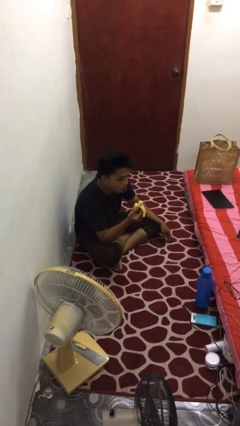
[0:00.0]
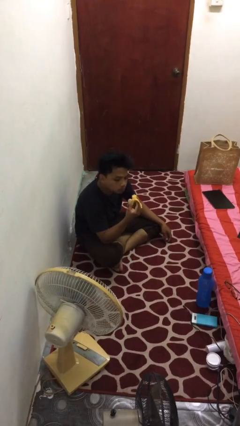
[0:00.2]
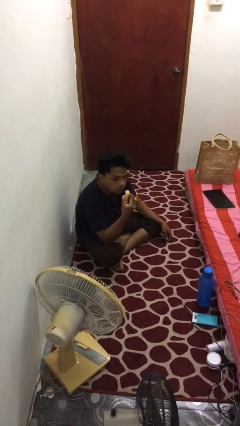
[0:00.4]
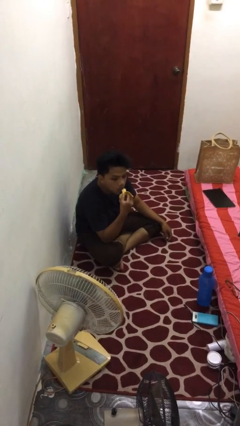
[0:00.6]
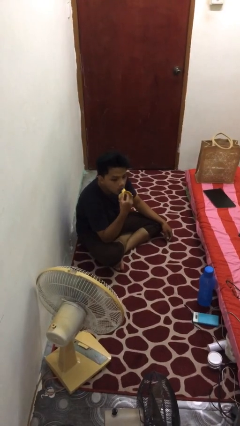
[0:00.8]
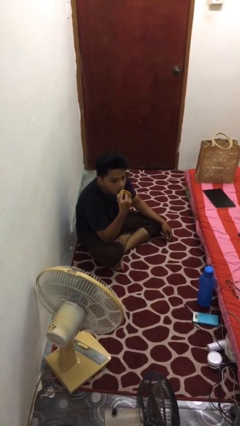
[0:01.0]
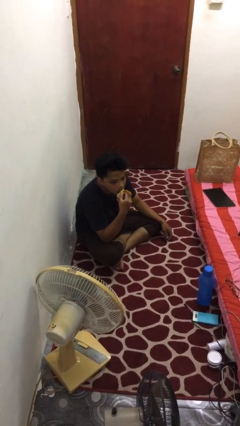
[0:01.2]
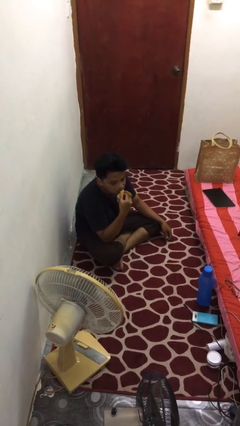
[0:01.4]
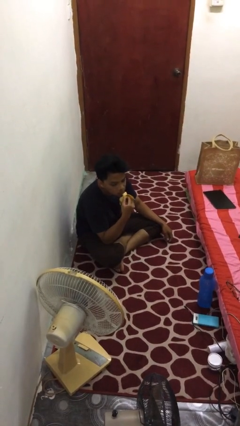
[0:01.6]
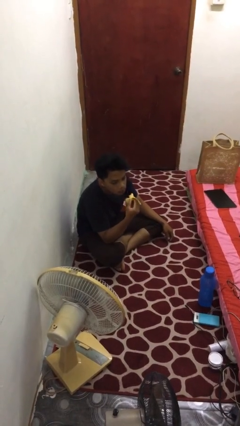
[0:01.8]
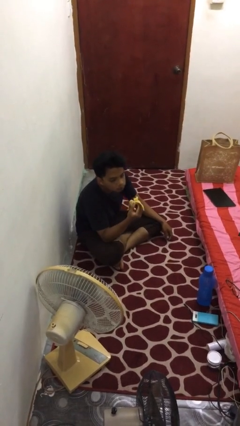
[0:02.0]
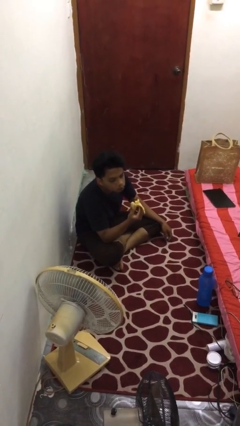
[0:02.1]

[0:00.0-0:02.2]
person eats banana

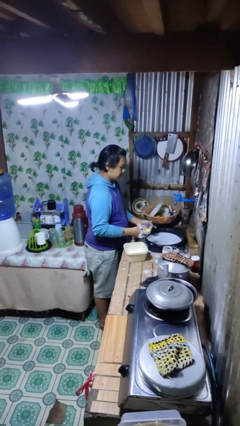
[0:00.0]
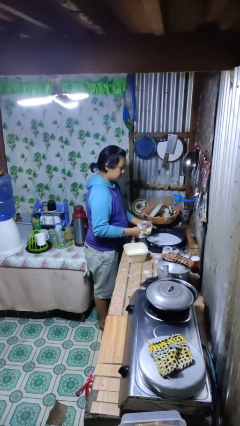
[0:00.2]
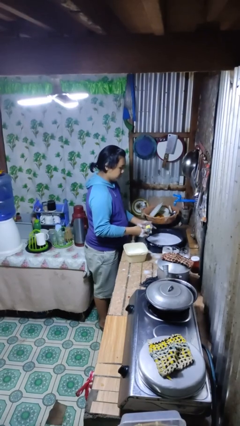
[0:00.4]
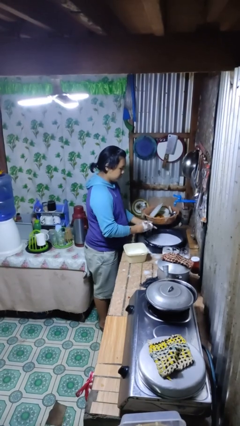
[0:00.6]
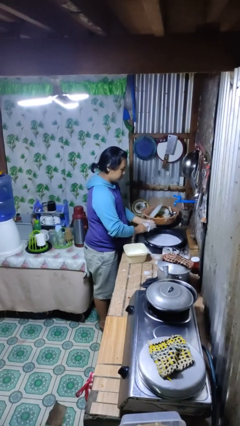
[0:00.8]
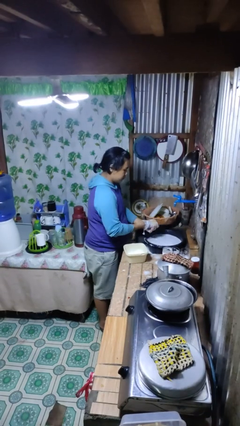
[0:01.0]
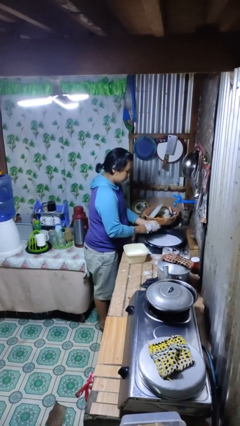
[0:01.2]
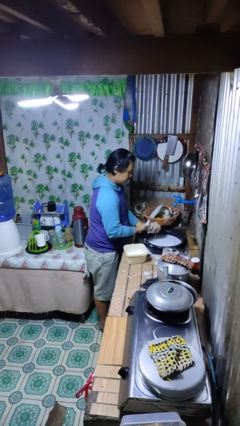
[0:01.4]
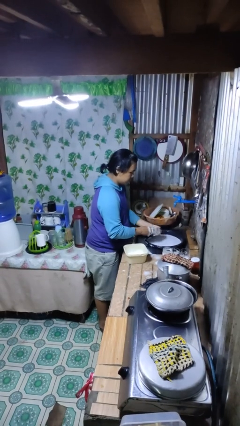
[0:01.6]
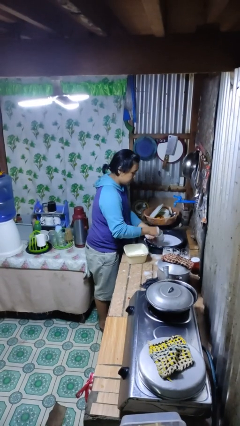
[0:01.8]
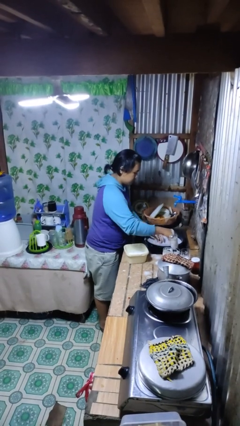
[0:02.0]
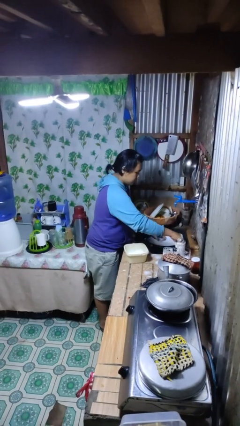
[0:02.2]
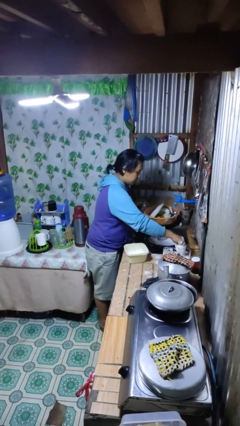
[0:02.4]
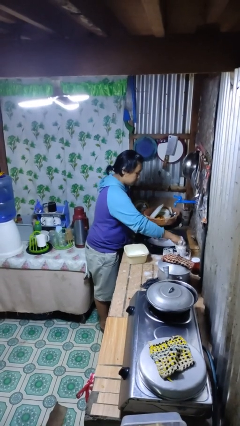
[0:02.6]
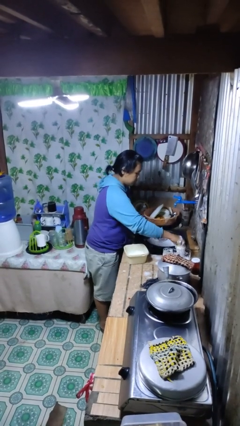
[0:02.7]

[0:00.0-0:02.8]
person washes dish

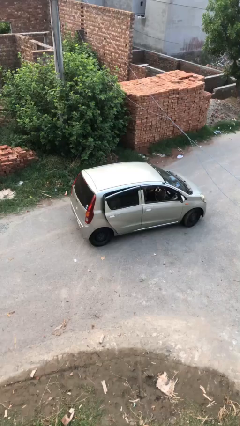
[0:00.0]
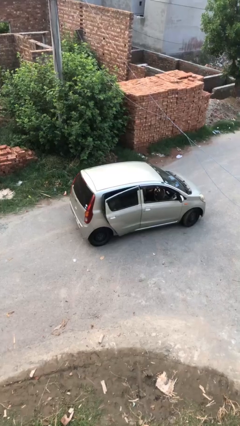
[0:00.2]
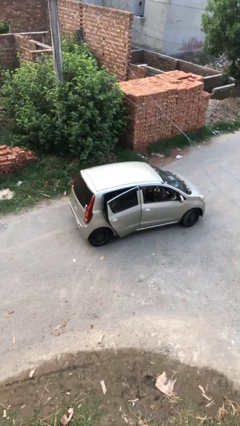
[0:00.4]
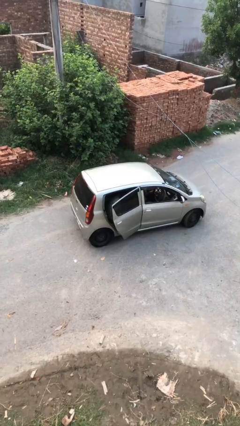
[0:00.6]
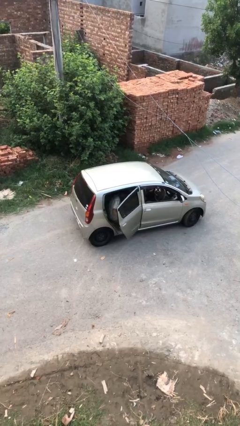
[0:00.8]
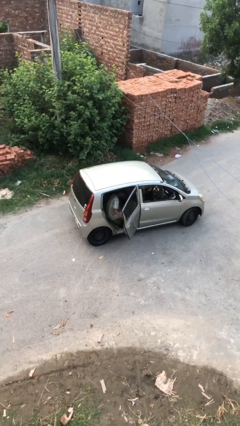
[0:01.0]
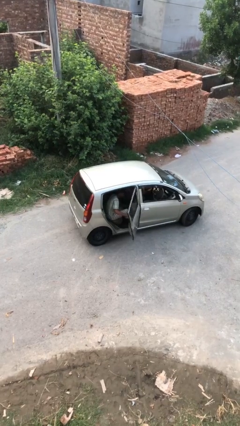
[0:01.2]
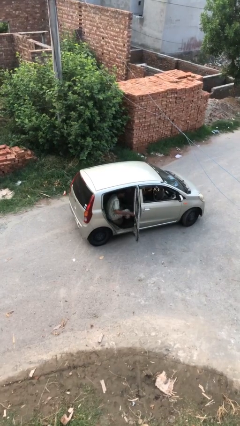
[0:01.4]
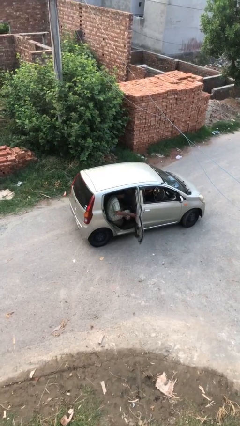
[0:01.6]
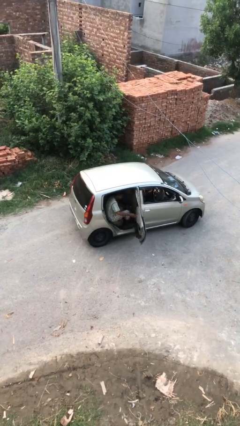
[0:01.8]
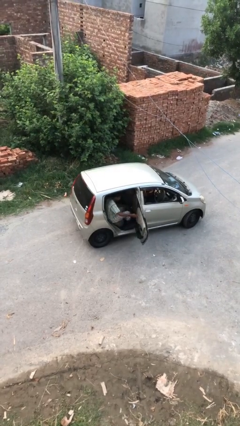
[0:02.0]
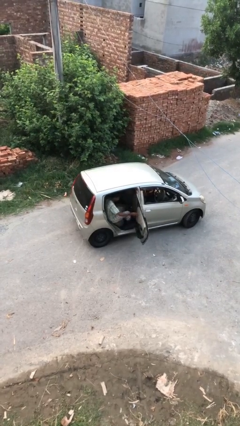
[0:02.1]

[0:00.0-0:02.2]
person opens car door

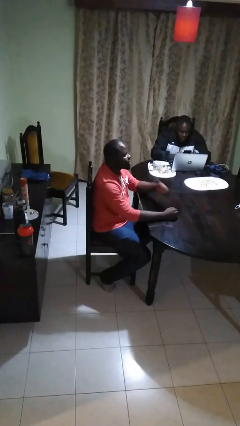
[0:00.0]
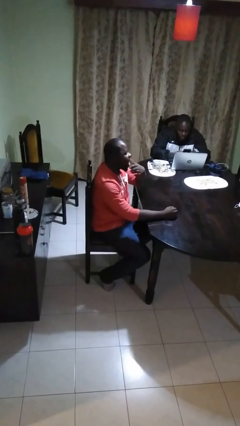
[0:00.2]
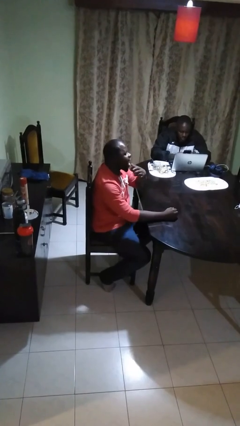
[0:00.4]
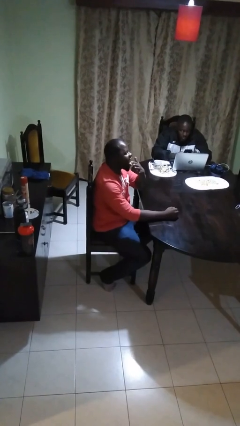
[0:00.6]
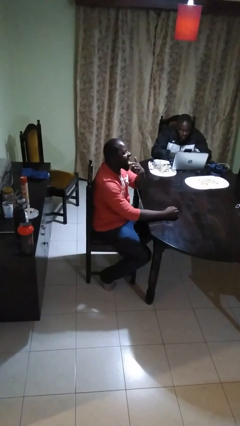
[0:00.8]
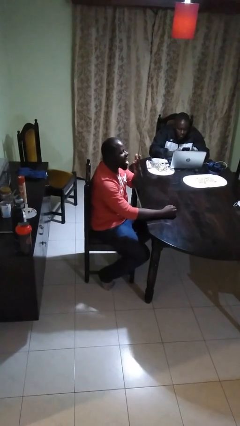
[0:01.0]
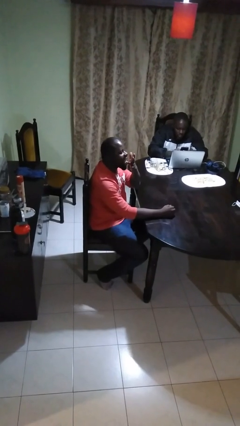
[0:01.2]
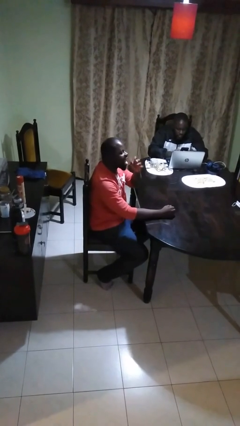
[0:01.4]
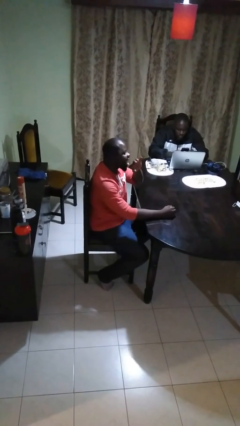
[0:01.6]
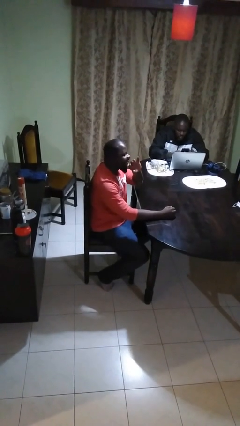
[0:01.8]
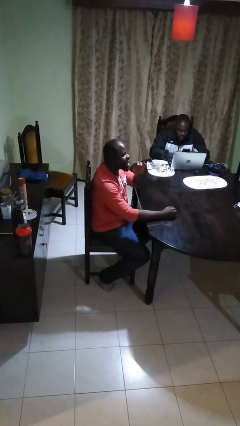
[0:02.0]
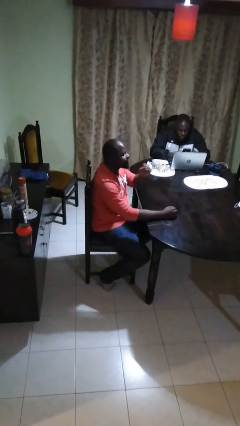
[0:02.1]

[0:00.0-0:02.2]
person licks fingers

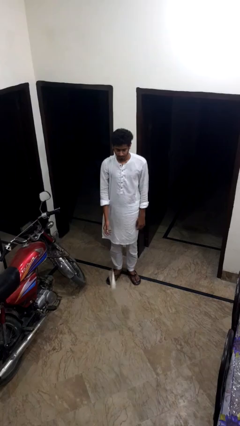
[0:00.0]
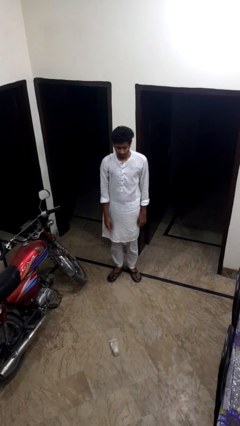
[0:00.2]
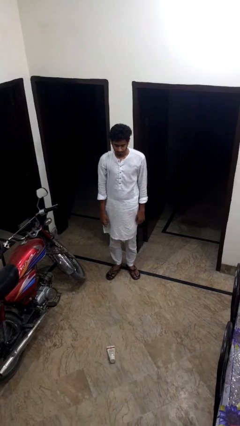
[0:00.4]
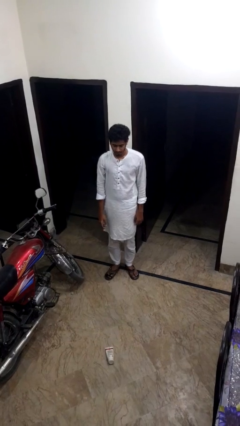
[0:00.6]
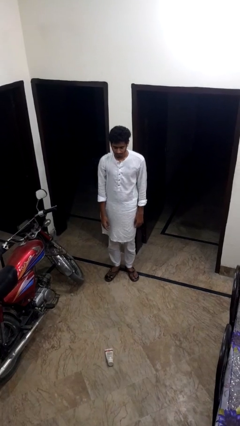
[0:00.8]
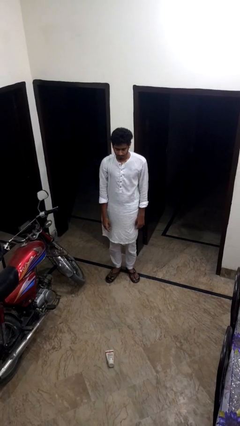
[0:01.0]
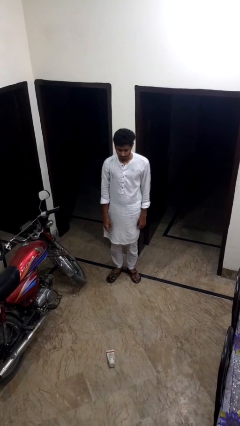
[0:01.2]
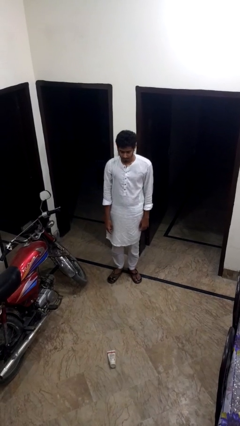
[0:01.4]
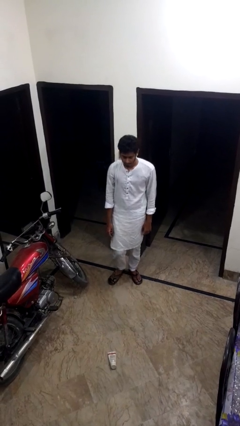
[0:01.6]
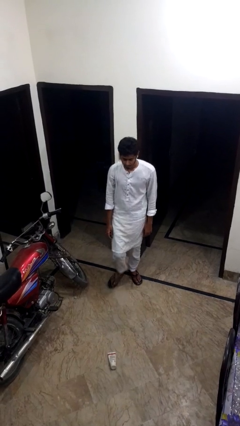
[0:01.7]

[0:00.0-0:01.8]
person throws object to ground

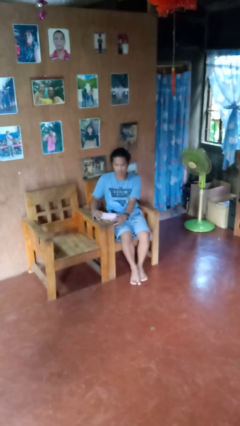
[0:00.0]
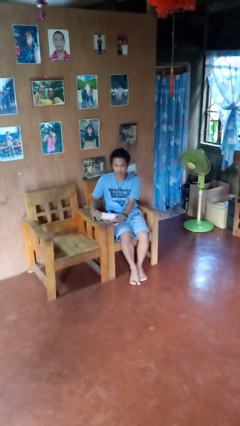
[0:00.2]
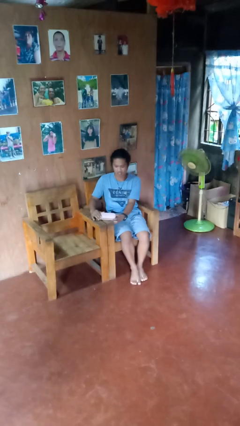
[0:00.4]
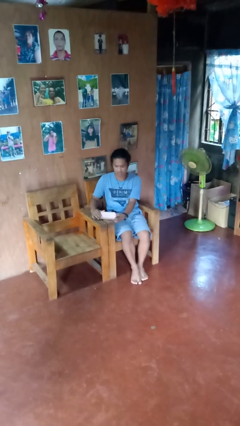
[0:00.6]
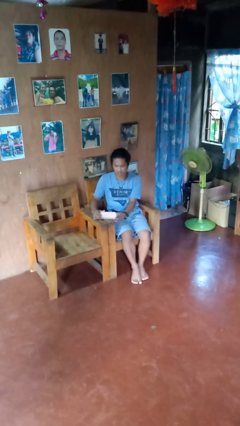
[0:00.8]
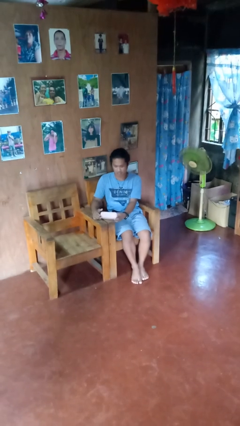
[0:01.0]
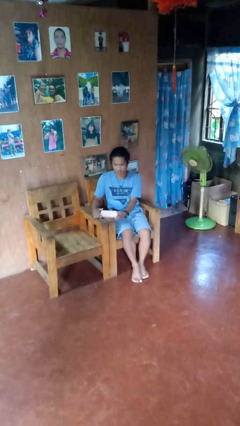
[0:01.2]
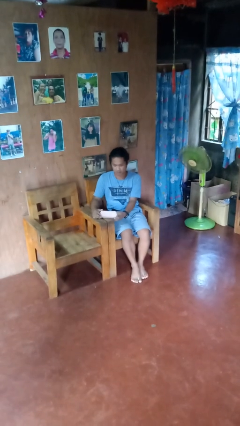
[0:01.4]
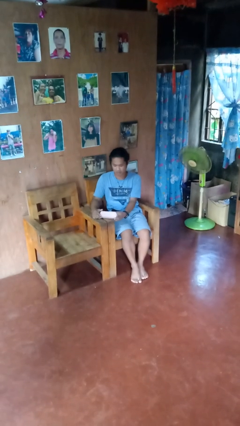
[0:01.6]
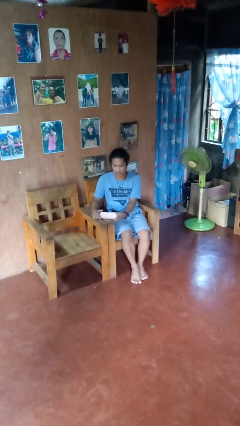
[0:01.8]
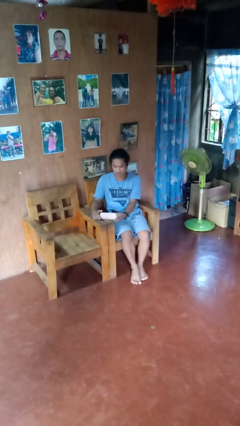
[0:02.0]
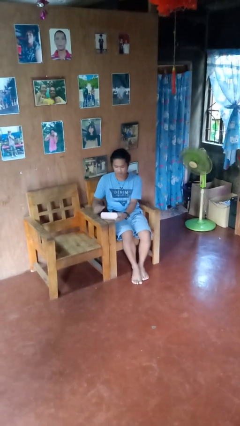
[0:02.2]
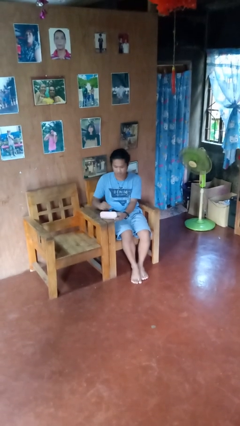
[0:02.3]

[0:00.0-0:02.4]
person opens jewelry box

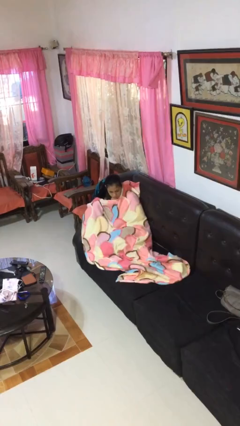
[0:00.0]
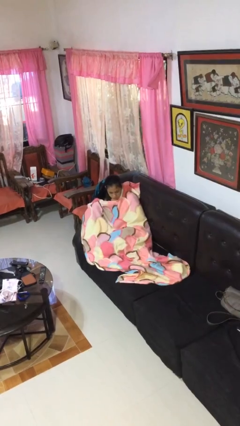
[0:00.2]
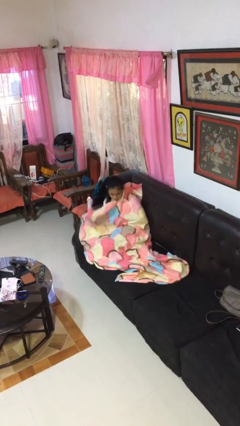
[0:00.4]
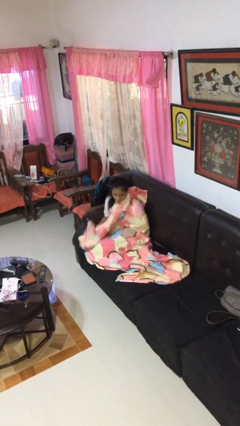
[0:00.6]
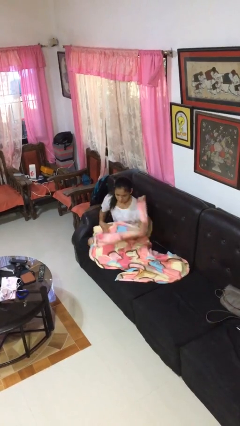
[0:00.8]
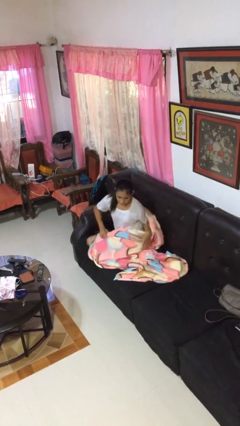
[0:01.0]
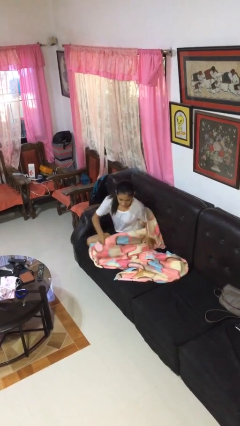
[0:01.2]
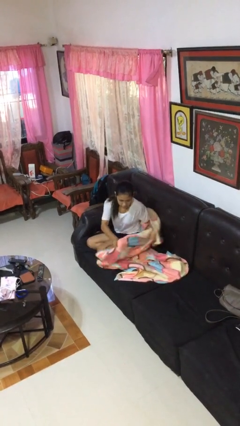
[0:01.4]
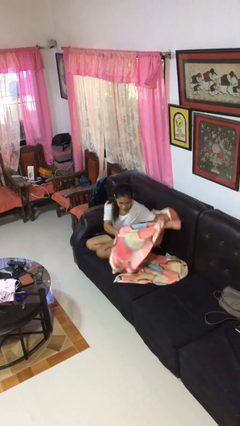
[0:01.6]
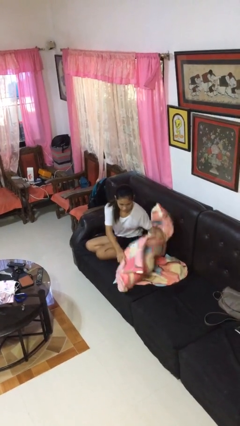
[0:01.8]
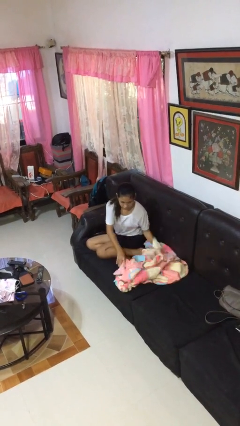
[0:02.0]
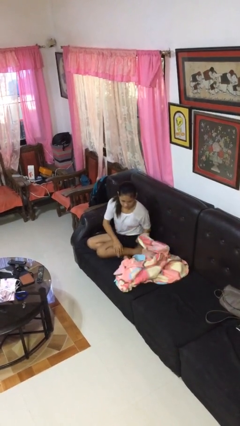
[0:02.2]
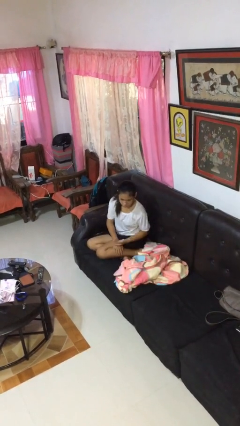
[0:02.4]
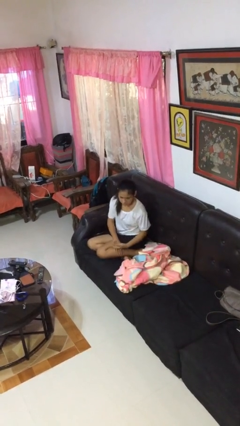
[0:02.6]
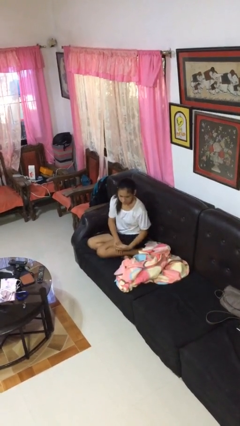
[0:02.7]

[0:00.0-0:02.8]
person uncovers with blanket

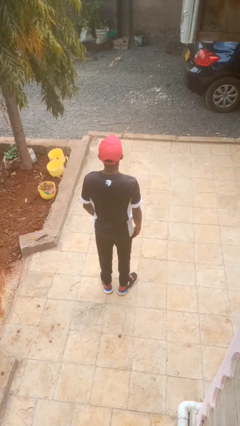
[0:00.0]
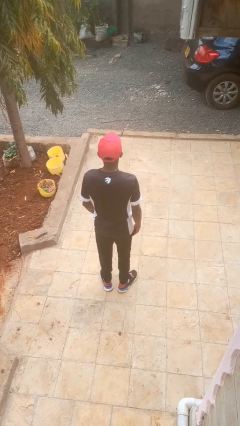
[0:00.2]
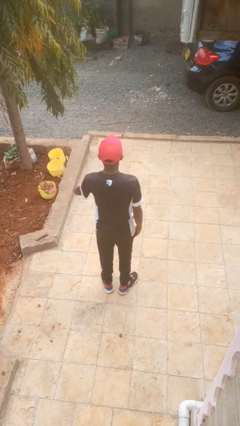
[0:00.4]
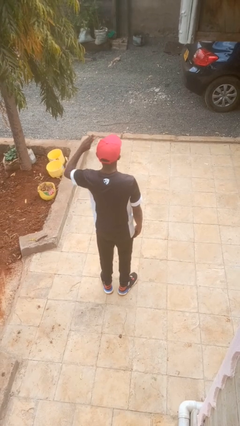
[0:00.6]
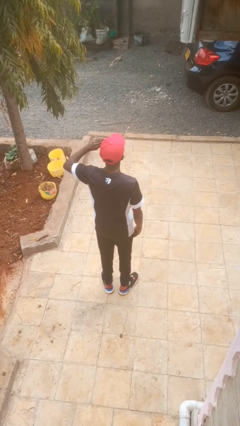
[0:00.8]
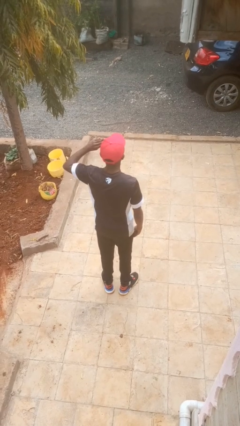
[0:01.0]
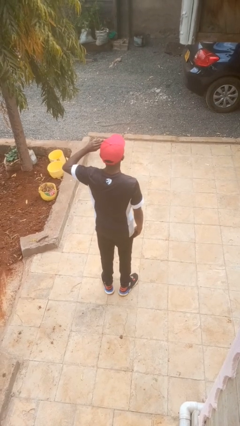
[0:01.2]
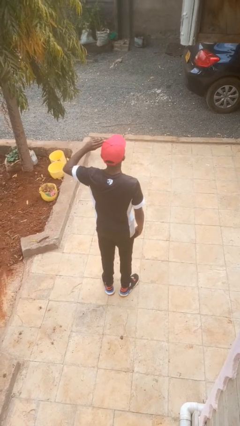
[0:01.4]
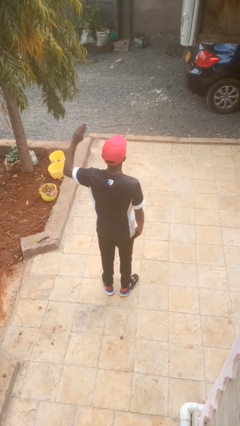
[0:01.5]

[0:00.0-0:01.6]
person salutes